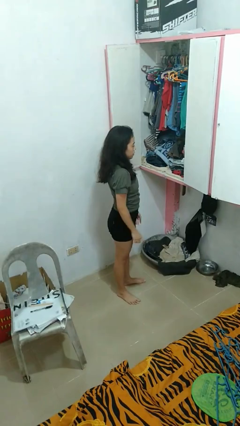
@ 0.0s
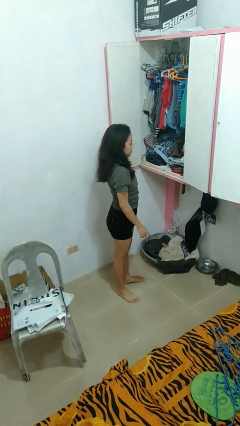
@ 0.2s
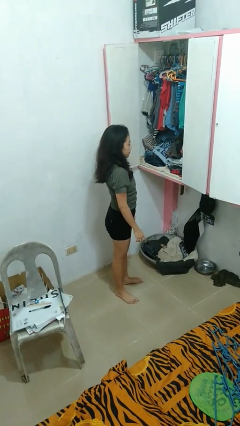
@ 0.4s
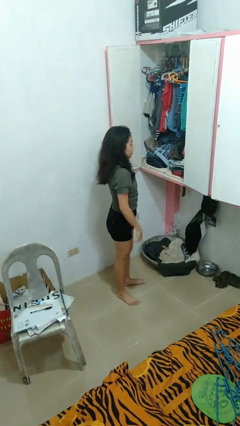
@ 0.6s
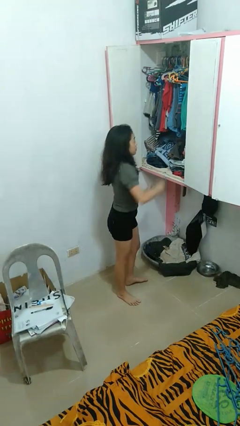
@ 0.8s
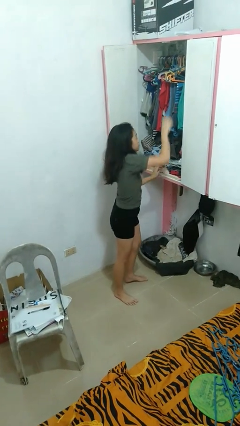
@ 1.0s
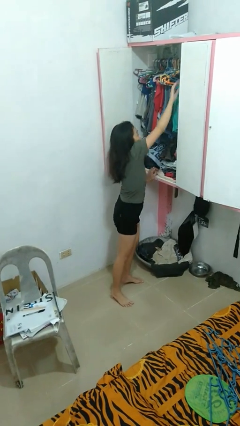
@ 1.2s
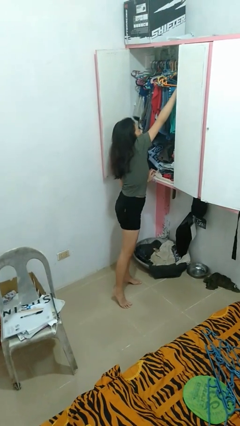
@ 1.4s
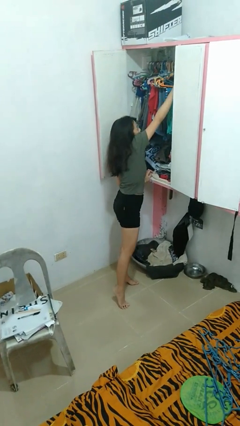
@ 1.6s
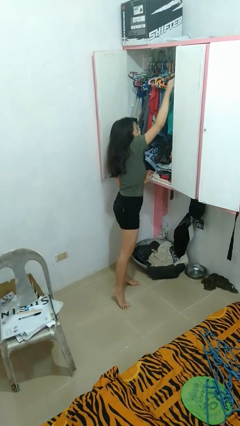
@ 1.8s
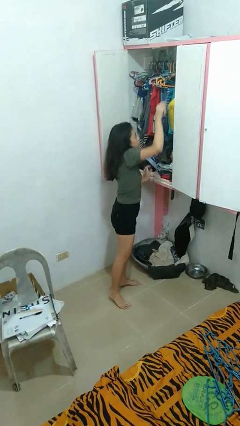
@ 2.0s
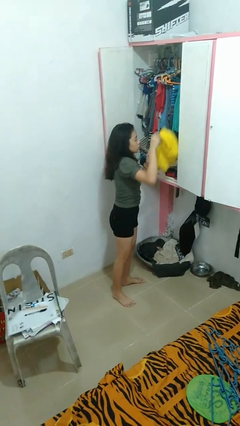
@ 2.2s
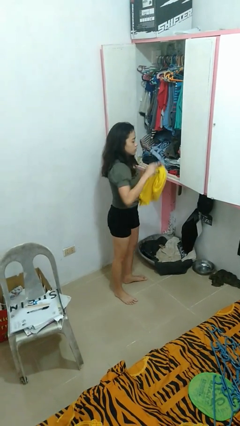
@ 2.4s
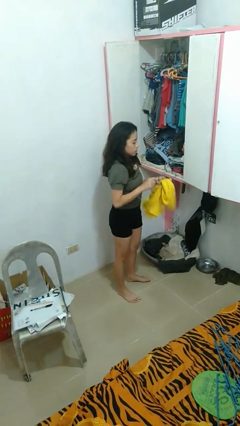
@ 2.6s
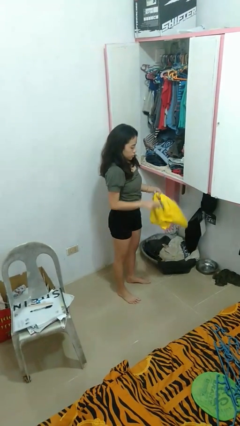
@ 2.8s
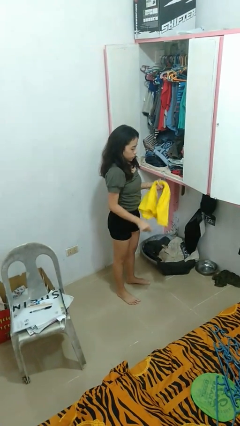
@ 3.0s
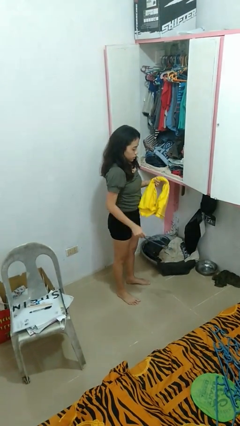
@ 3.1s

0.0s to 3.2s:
person takes clothes from closet

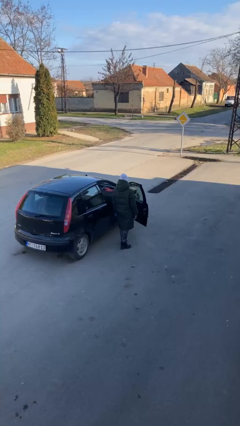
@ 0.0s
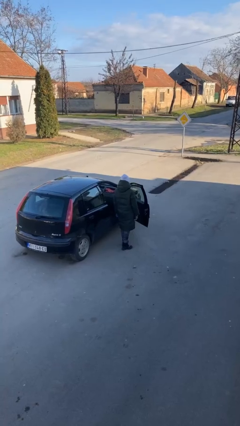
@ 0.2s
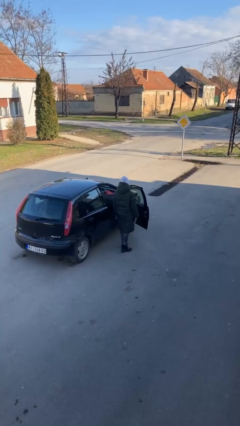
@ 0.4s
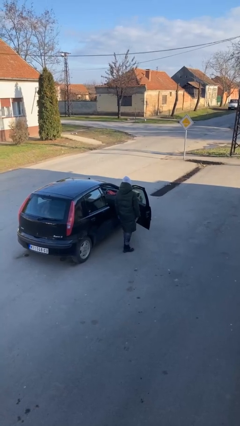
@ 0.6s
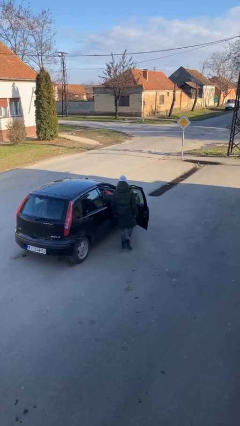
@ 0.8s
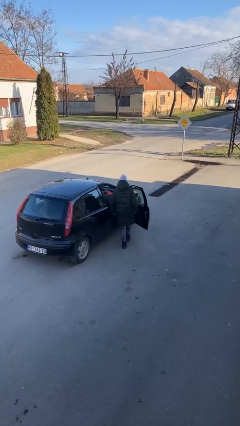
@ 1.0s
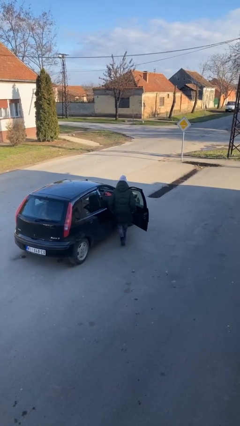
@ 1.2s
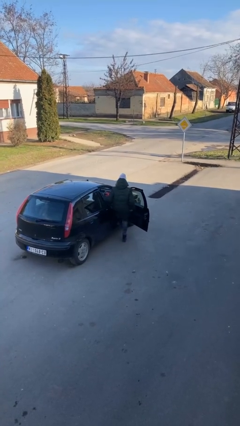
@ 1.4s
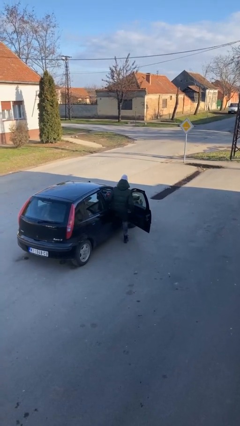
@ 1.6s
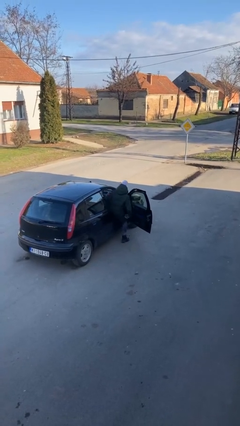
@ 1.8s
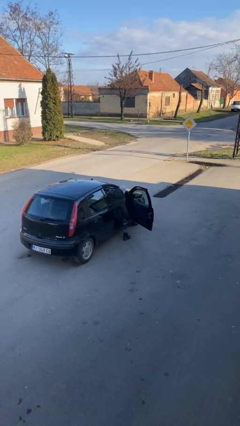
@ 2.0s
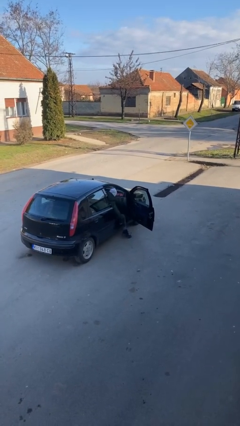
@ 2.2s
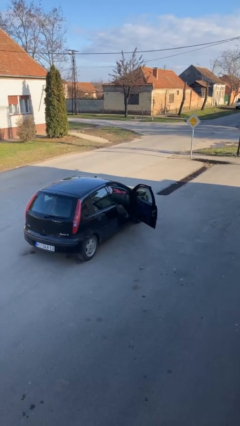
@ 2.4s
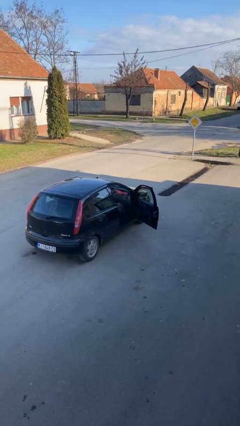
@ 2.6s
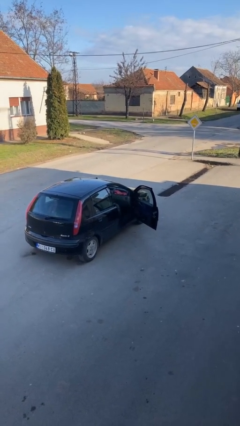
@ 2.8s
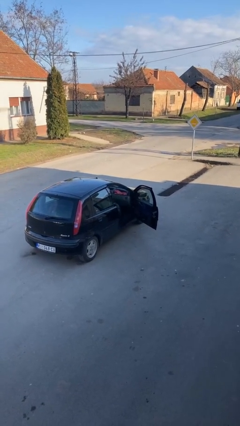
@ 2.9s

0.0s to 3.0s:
person enters car

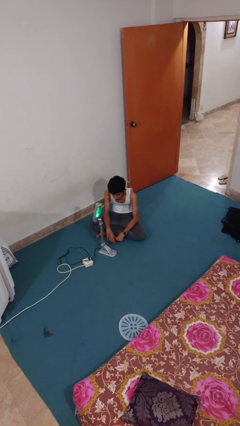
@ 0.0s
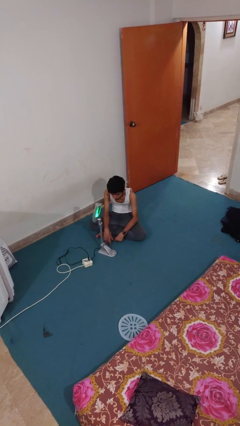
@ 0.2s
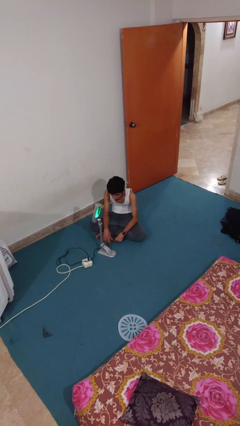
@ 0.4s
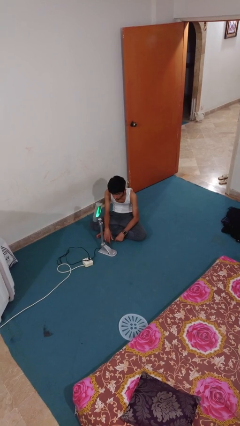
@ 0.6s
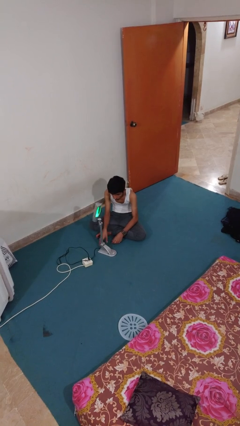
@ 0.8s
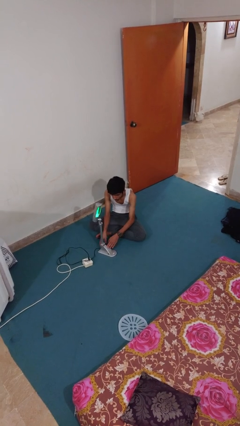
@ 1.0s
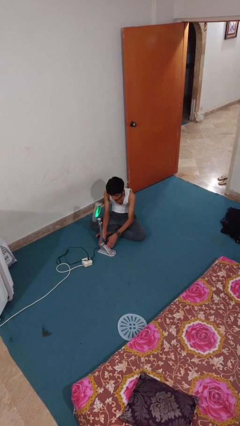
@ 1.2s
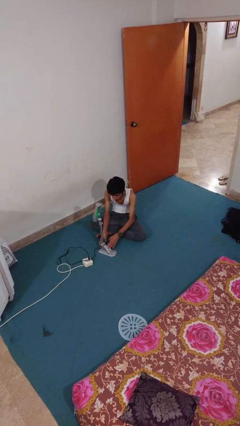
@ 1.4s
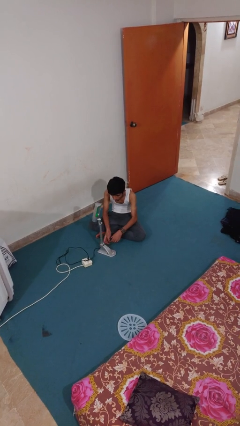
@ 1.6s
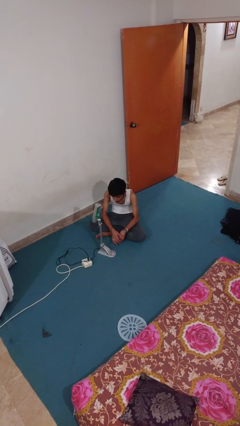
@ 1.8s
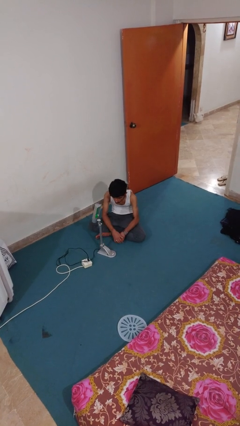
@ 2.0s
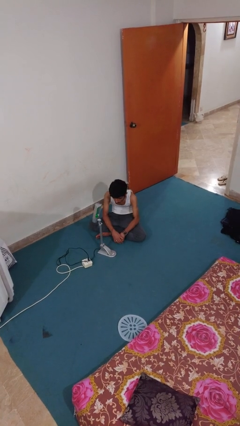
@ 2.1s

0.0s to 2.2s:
person turns off lamp

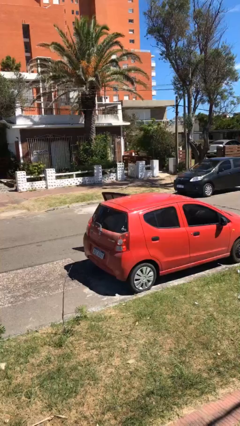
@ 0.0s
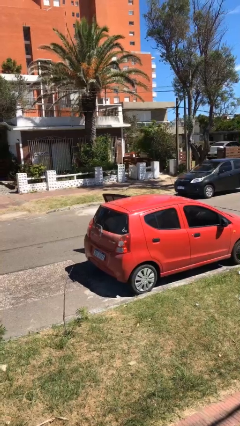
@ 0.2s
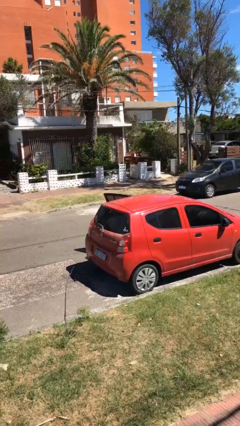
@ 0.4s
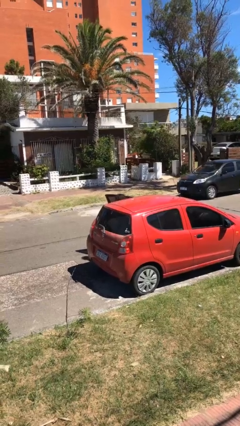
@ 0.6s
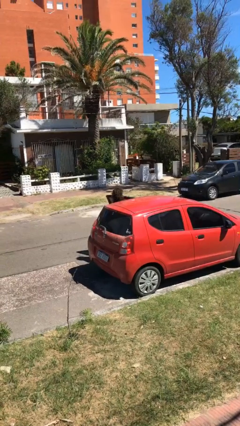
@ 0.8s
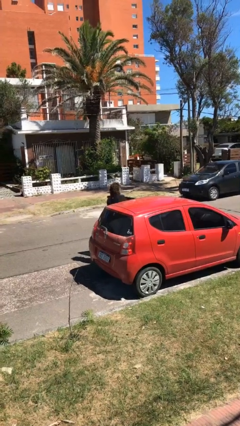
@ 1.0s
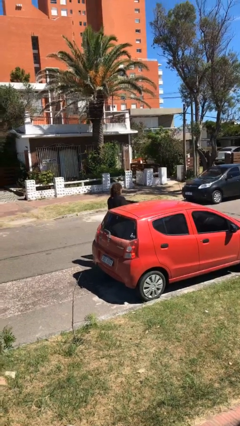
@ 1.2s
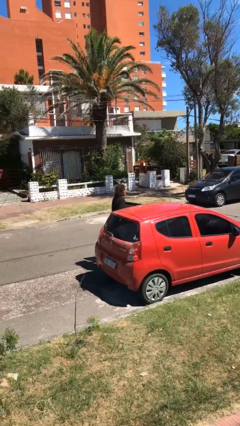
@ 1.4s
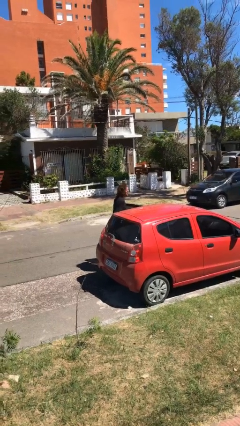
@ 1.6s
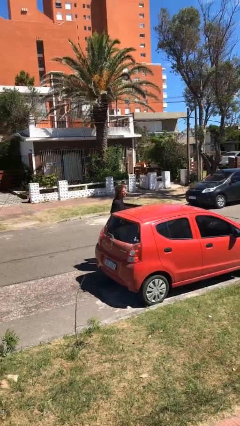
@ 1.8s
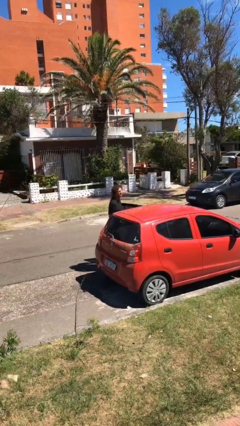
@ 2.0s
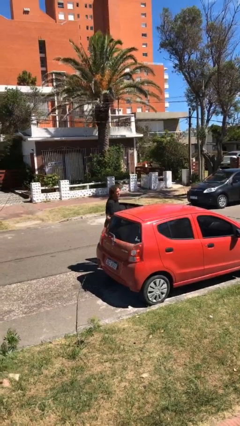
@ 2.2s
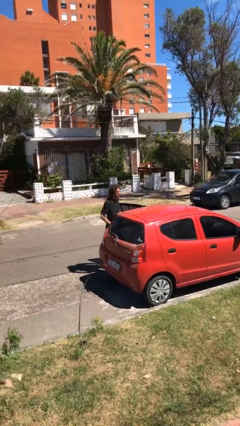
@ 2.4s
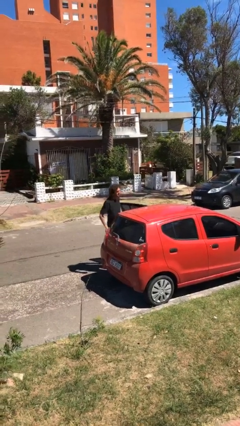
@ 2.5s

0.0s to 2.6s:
person exits car

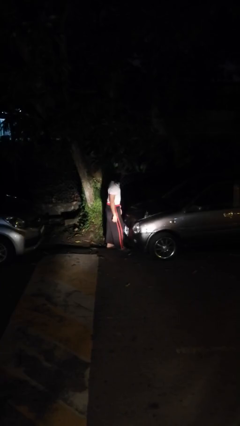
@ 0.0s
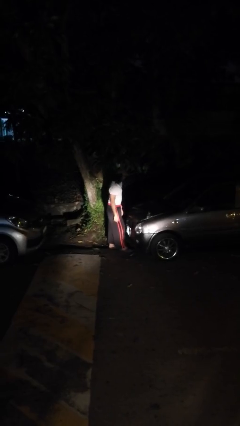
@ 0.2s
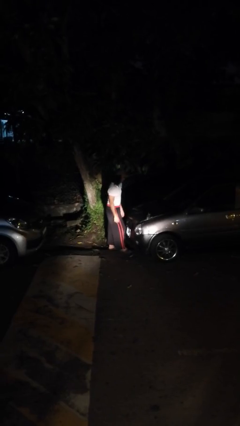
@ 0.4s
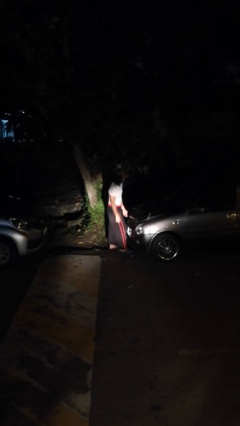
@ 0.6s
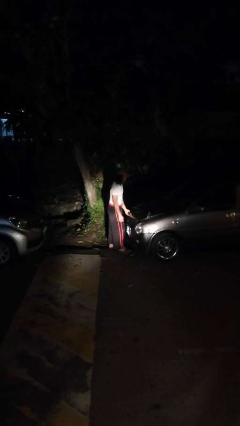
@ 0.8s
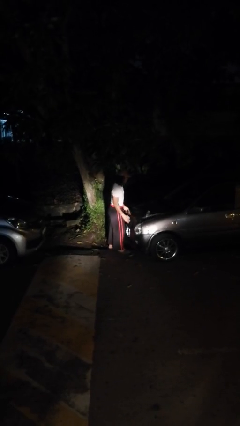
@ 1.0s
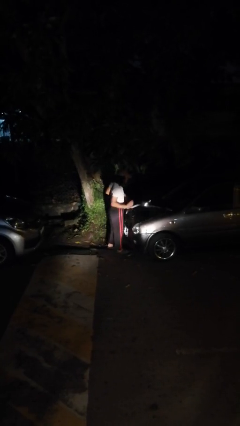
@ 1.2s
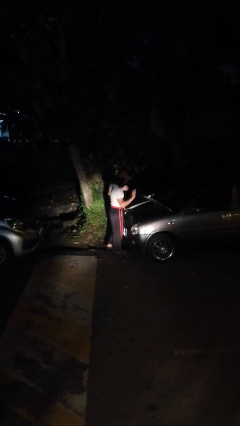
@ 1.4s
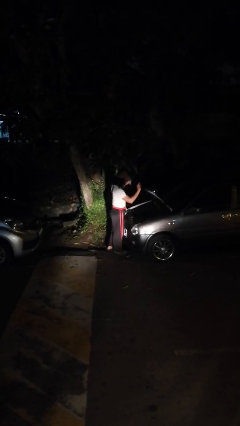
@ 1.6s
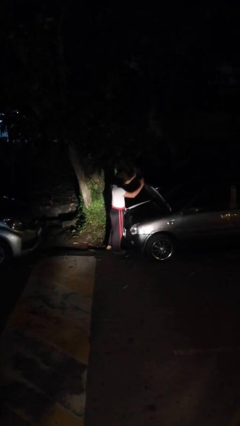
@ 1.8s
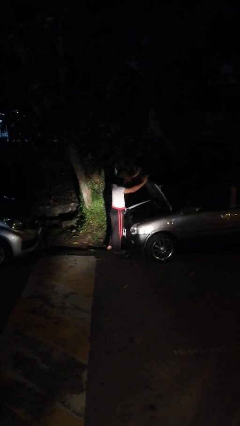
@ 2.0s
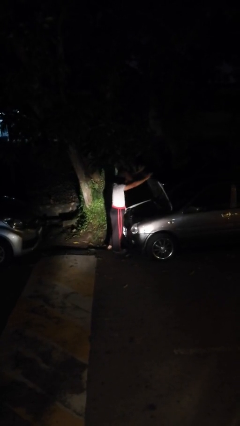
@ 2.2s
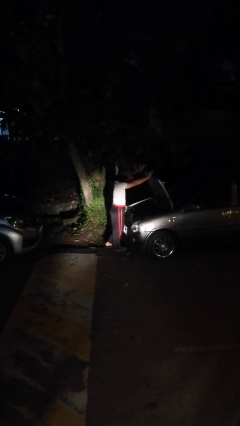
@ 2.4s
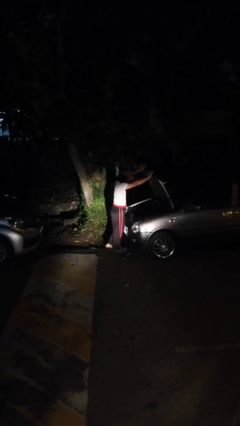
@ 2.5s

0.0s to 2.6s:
person opens car hood

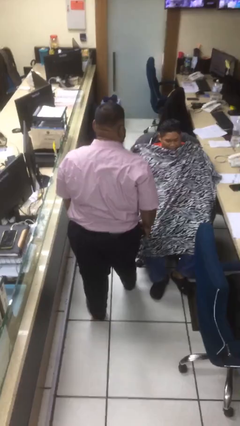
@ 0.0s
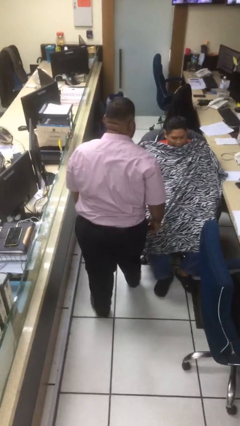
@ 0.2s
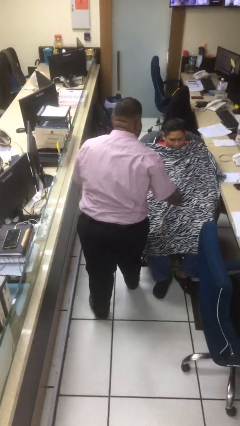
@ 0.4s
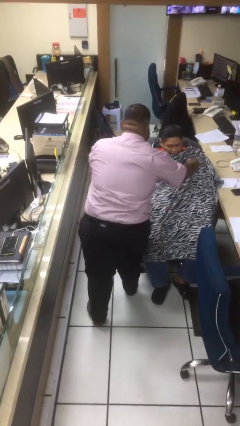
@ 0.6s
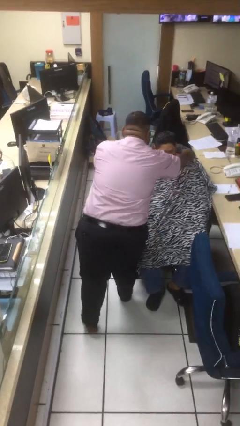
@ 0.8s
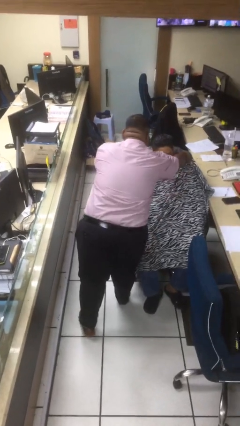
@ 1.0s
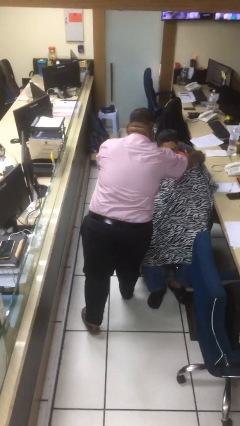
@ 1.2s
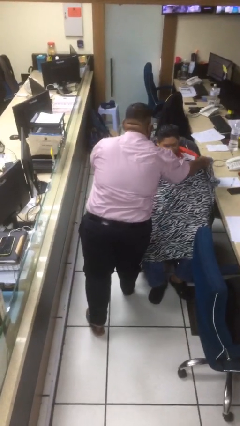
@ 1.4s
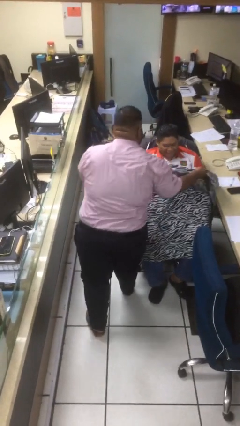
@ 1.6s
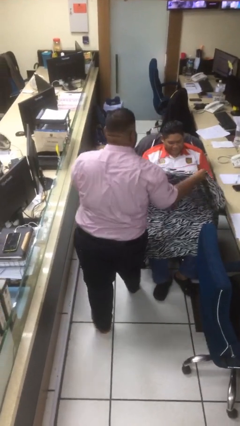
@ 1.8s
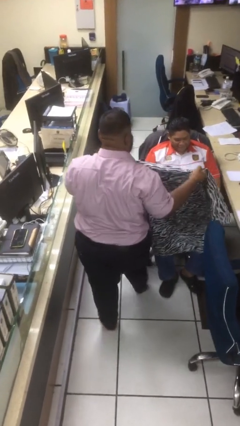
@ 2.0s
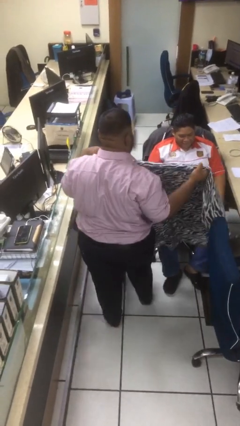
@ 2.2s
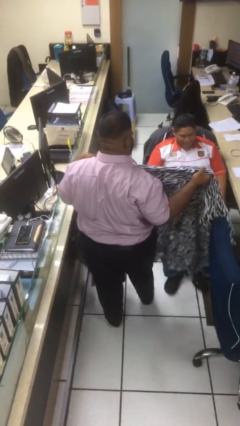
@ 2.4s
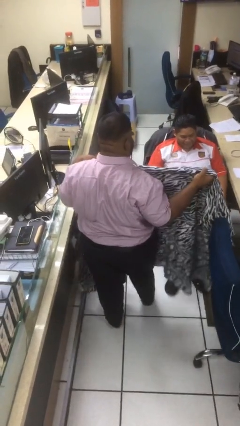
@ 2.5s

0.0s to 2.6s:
person uncovers friend with blanket

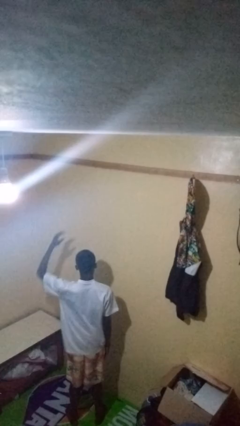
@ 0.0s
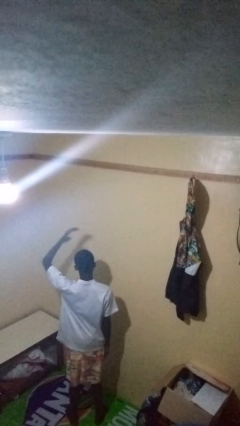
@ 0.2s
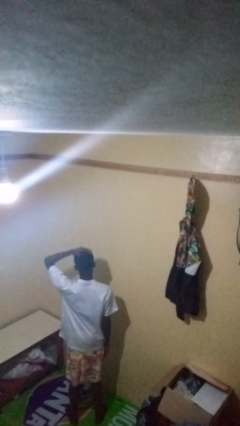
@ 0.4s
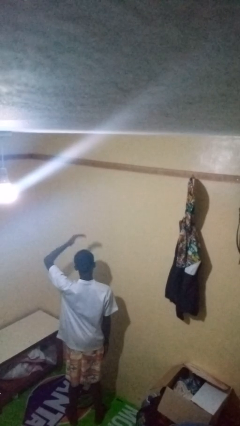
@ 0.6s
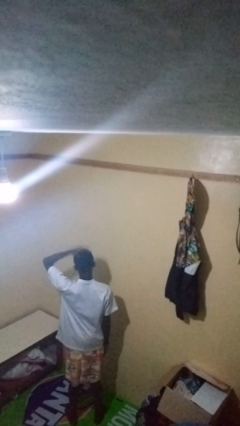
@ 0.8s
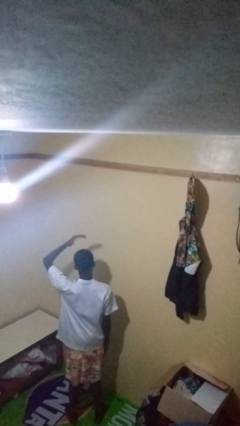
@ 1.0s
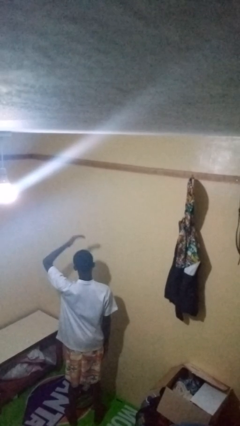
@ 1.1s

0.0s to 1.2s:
person pats head
